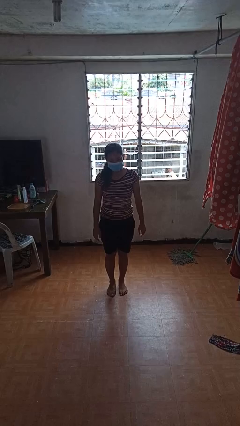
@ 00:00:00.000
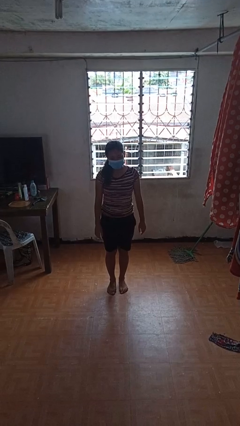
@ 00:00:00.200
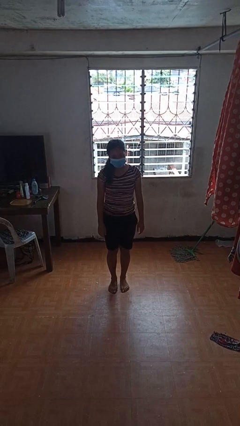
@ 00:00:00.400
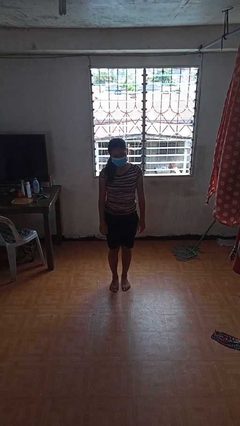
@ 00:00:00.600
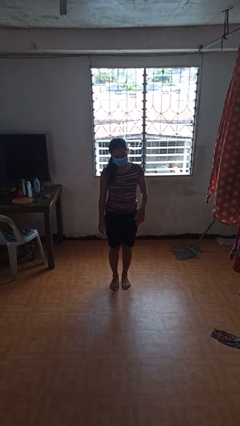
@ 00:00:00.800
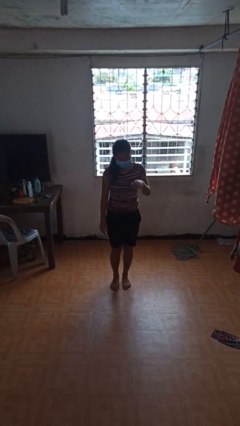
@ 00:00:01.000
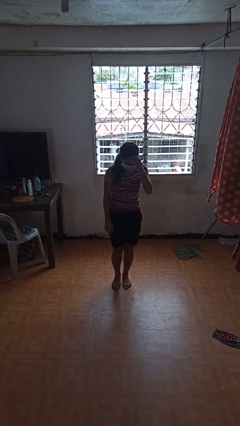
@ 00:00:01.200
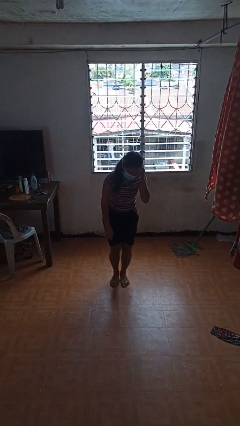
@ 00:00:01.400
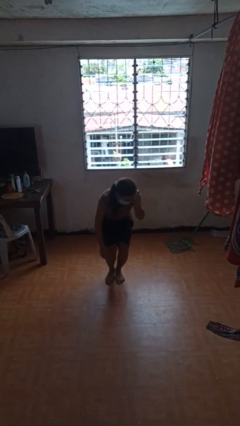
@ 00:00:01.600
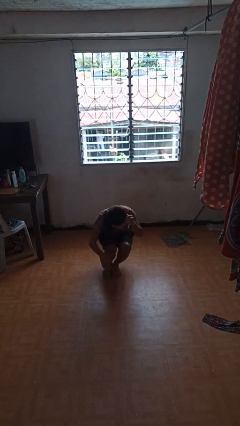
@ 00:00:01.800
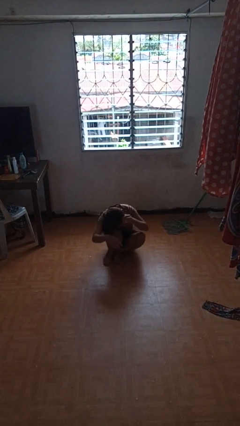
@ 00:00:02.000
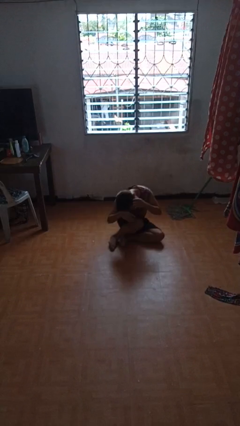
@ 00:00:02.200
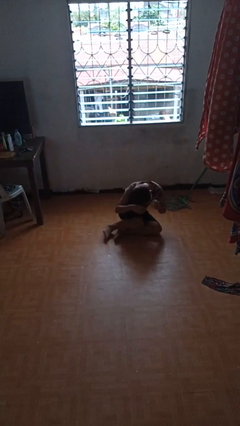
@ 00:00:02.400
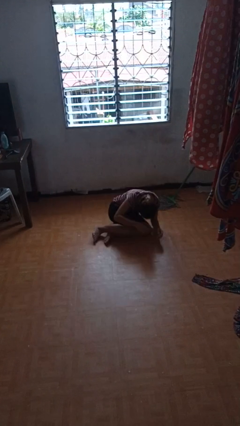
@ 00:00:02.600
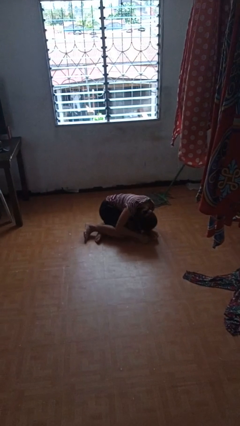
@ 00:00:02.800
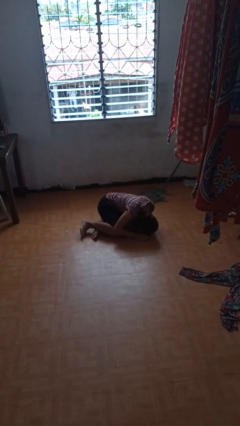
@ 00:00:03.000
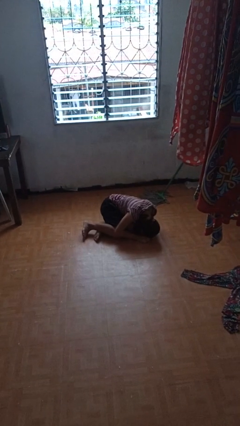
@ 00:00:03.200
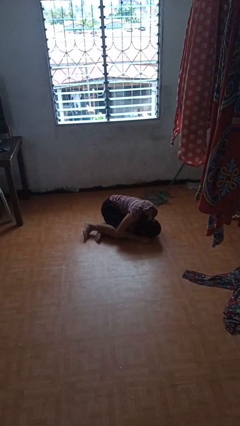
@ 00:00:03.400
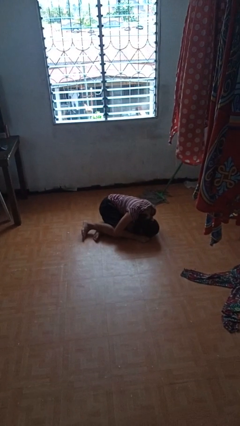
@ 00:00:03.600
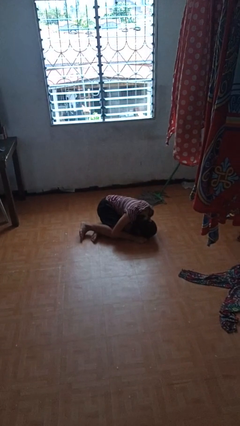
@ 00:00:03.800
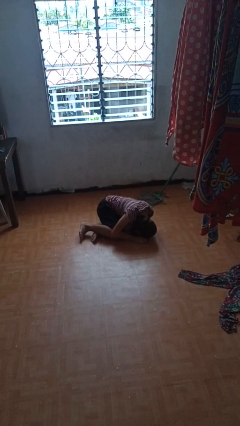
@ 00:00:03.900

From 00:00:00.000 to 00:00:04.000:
person falls while standing

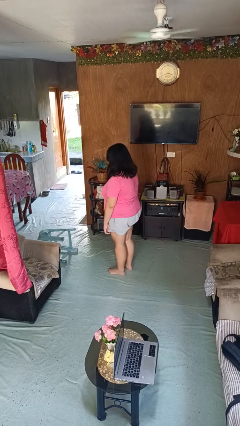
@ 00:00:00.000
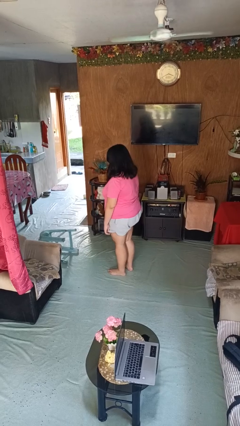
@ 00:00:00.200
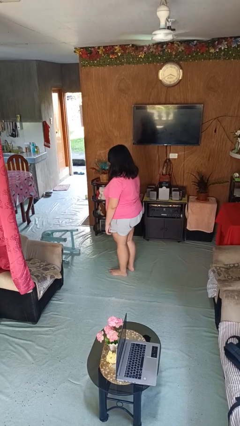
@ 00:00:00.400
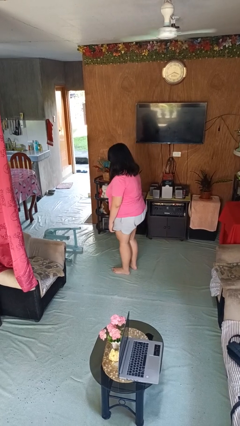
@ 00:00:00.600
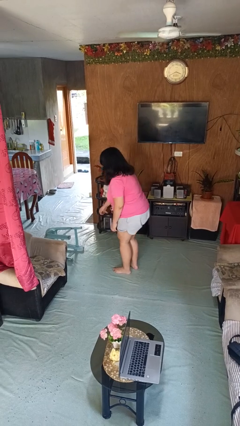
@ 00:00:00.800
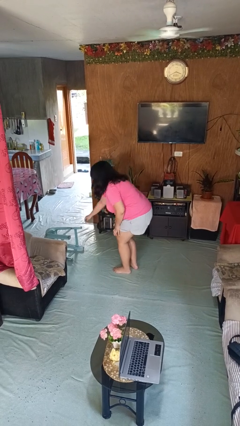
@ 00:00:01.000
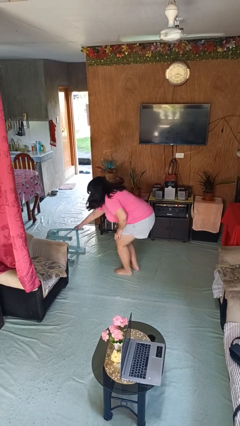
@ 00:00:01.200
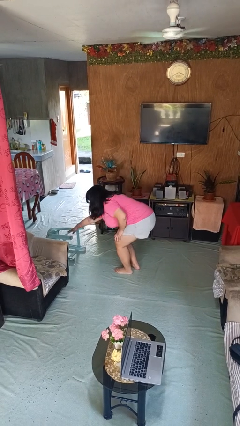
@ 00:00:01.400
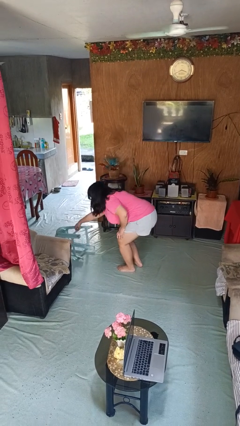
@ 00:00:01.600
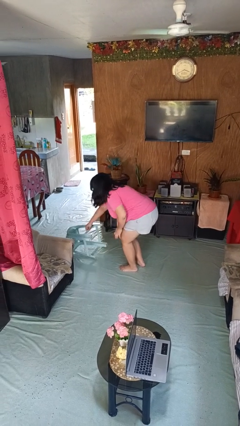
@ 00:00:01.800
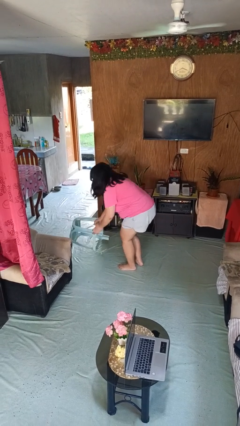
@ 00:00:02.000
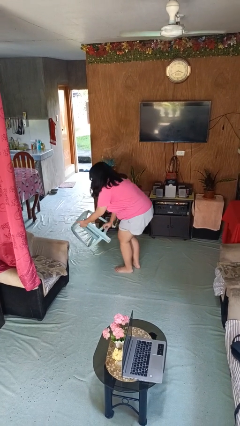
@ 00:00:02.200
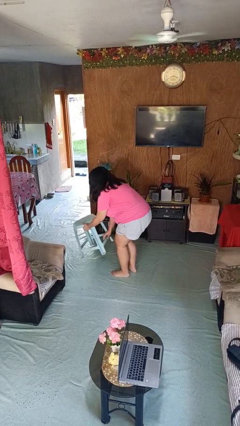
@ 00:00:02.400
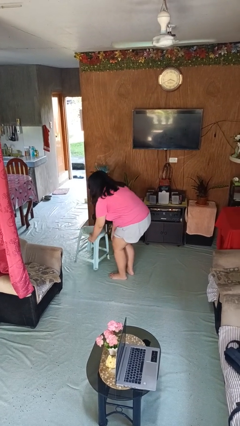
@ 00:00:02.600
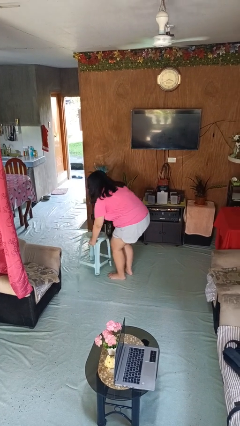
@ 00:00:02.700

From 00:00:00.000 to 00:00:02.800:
person sets upright furniture

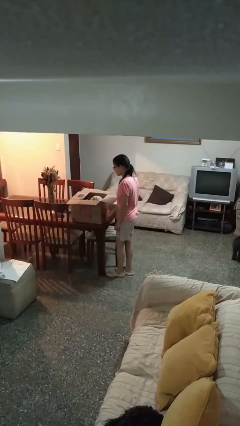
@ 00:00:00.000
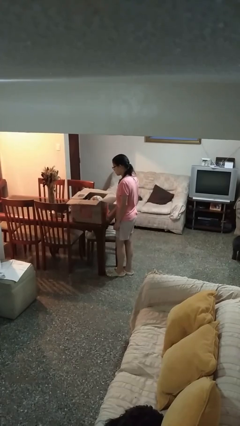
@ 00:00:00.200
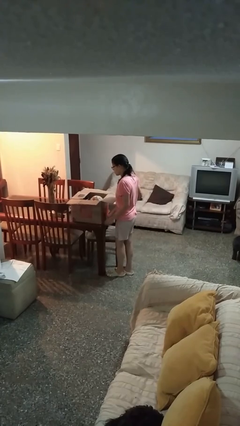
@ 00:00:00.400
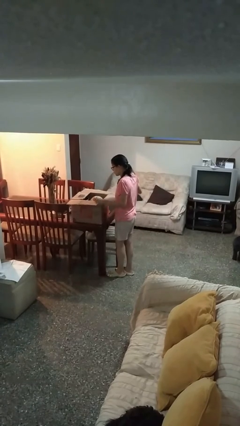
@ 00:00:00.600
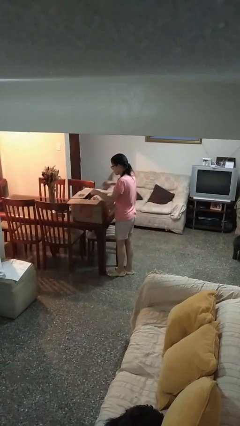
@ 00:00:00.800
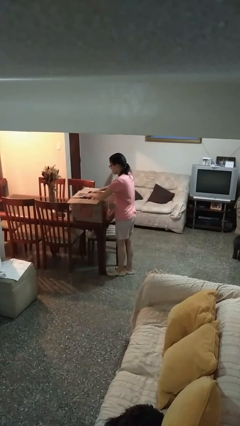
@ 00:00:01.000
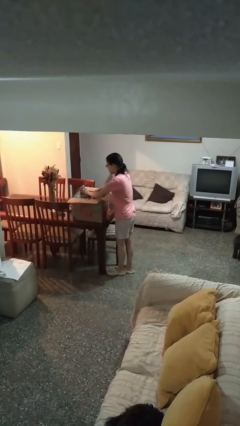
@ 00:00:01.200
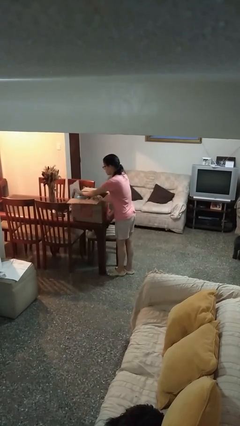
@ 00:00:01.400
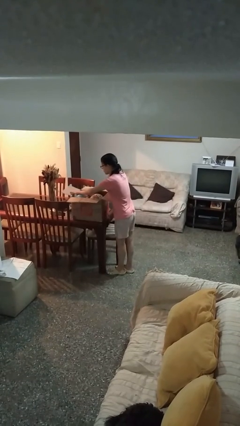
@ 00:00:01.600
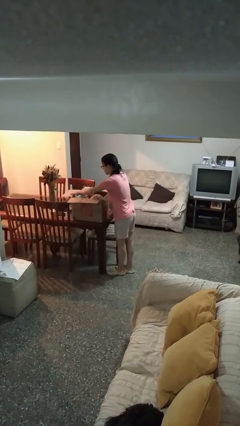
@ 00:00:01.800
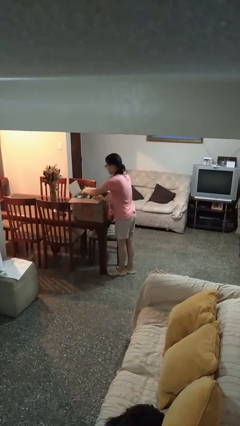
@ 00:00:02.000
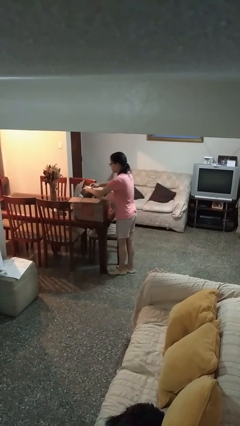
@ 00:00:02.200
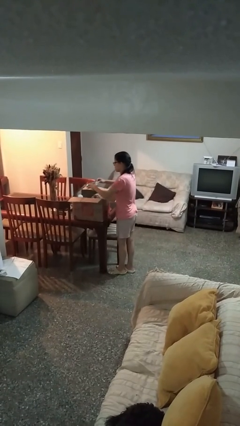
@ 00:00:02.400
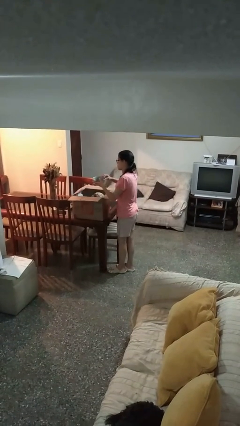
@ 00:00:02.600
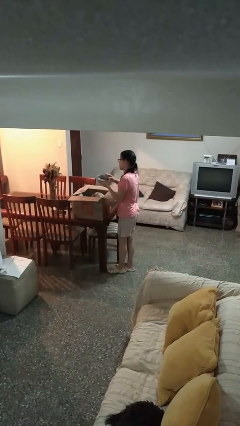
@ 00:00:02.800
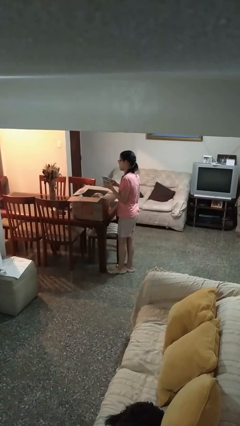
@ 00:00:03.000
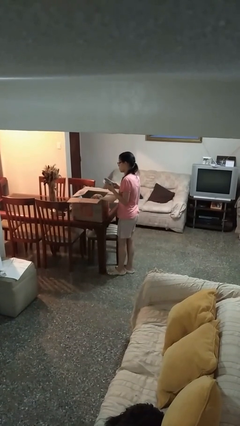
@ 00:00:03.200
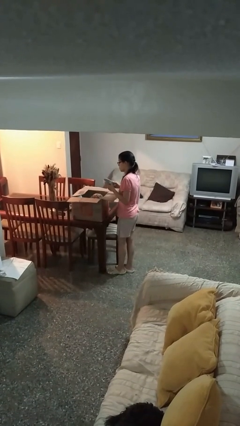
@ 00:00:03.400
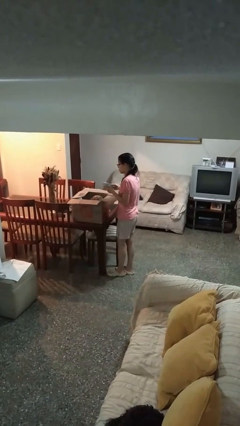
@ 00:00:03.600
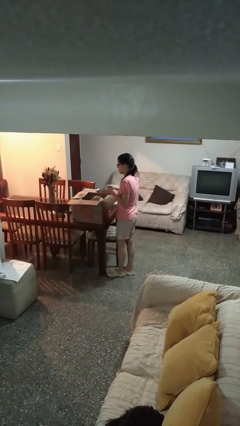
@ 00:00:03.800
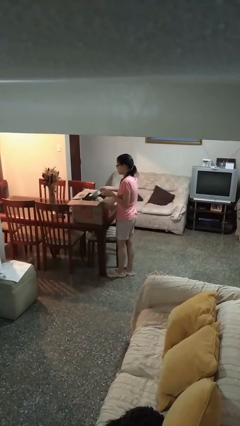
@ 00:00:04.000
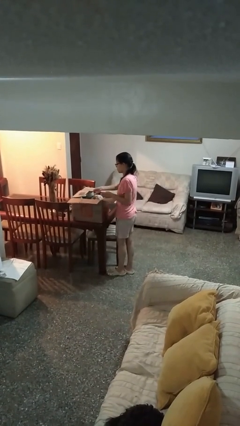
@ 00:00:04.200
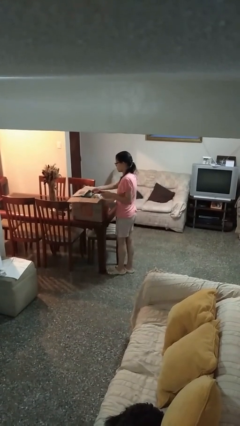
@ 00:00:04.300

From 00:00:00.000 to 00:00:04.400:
person searches in box

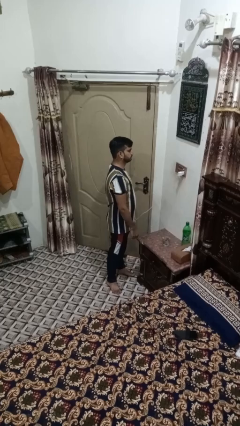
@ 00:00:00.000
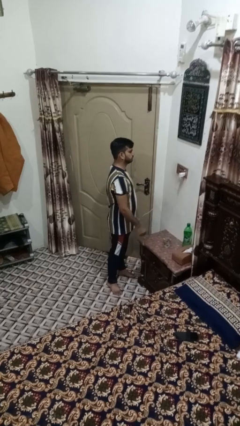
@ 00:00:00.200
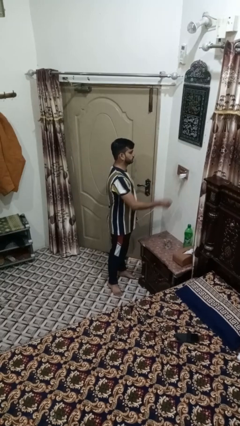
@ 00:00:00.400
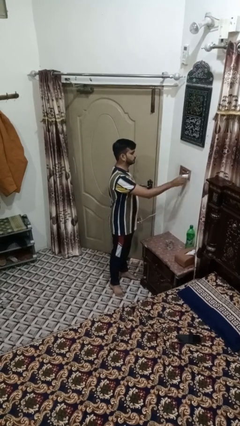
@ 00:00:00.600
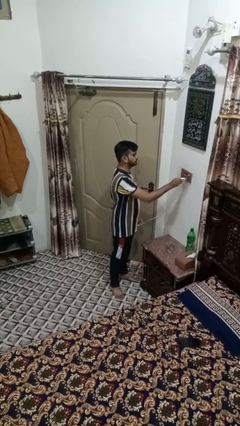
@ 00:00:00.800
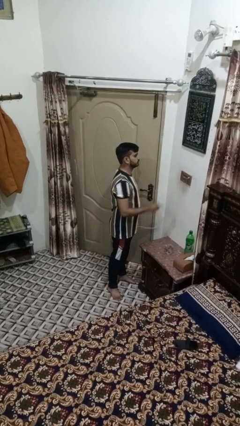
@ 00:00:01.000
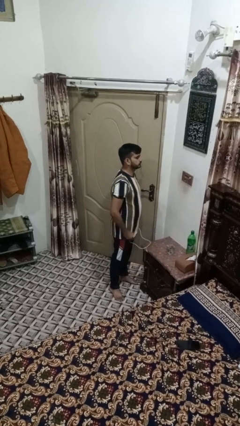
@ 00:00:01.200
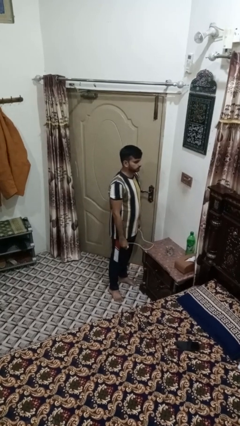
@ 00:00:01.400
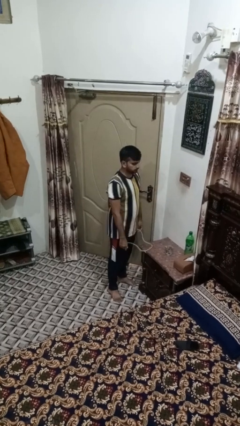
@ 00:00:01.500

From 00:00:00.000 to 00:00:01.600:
person unplugs from electrical socket

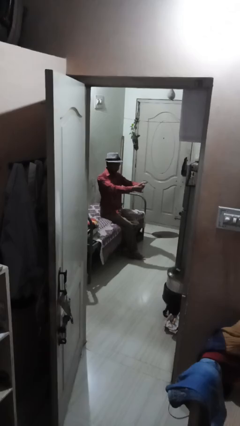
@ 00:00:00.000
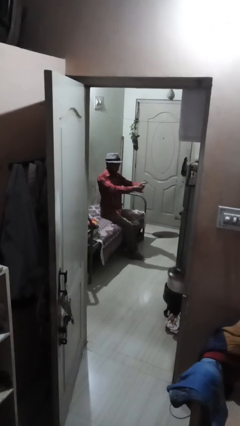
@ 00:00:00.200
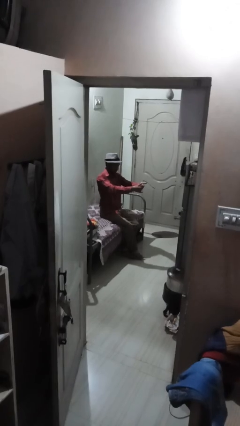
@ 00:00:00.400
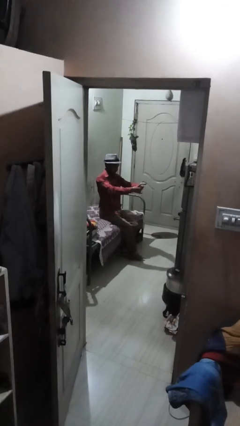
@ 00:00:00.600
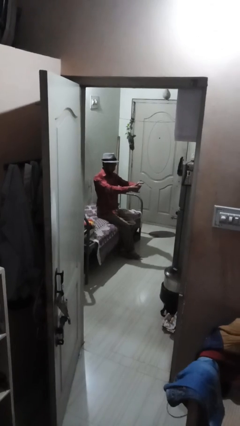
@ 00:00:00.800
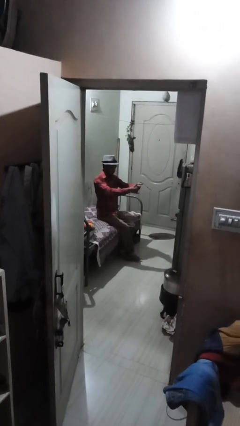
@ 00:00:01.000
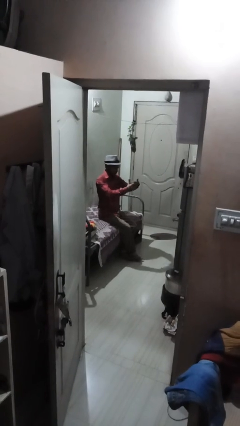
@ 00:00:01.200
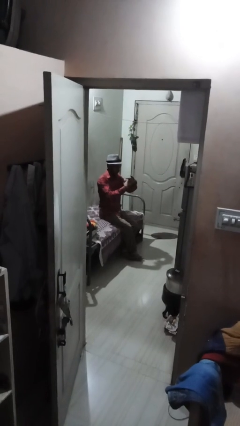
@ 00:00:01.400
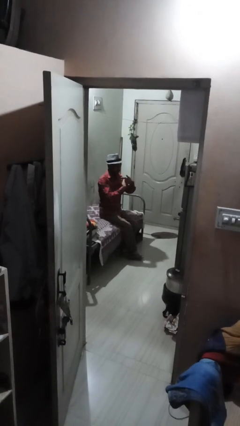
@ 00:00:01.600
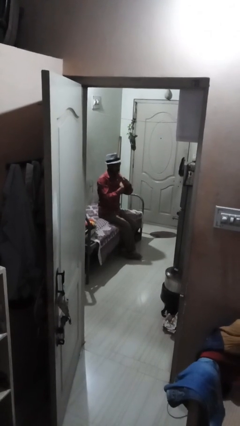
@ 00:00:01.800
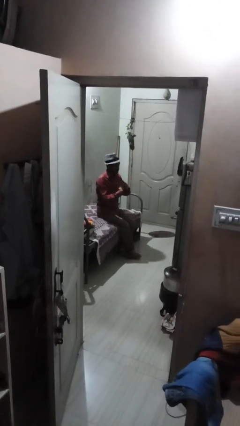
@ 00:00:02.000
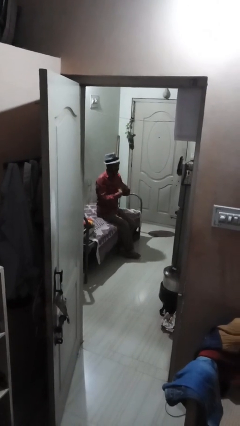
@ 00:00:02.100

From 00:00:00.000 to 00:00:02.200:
person cracks knuckles

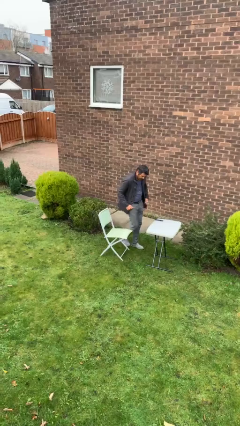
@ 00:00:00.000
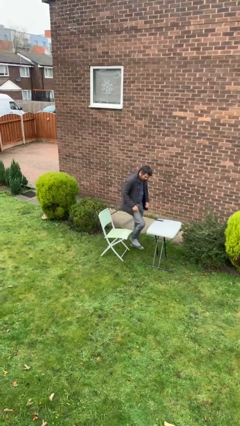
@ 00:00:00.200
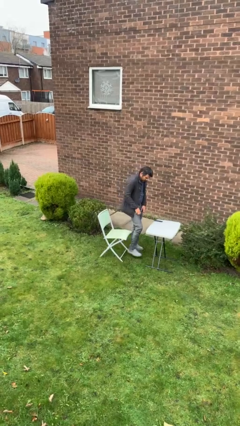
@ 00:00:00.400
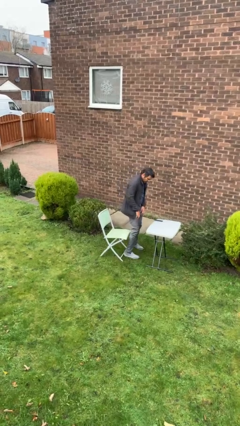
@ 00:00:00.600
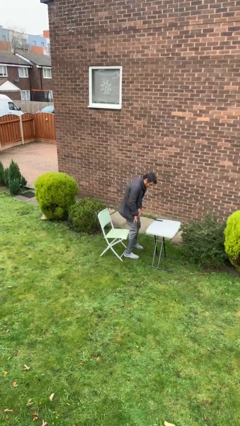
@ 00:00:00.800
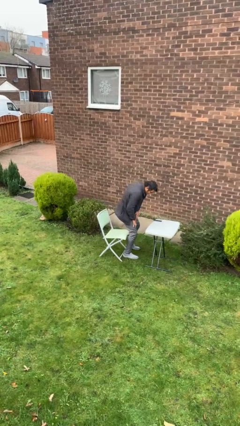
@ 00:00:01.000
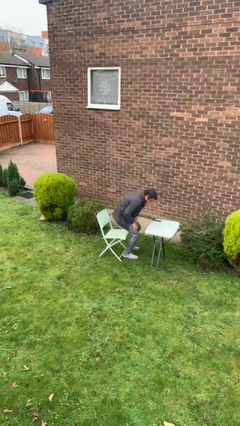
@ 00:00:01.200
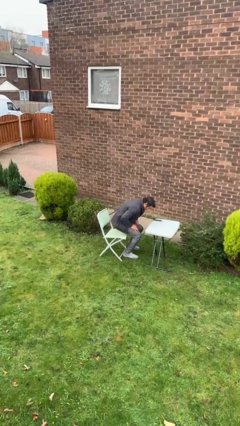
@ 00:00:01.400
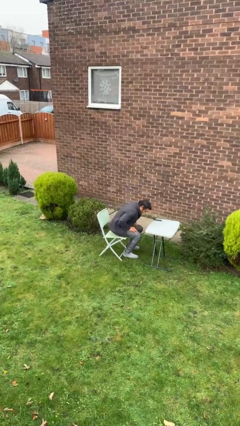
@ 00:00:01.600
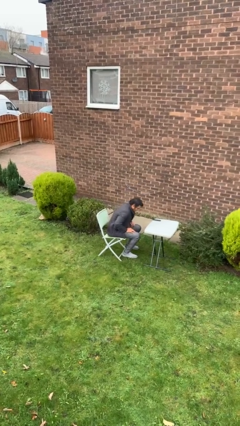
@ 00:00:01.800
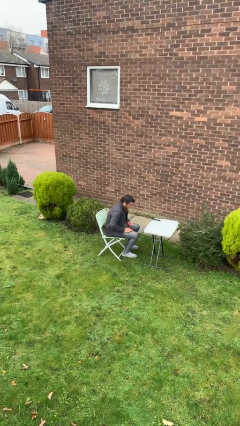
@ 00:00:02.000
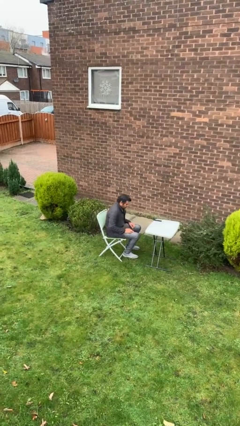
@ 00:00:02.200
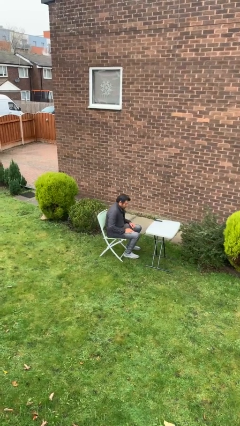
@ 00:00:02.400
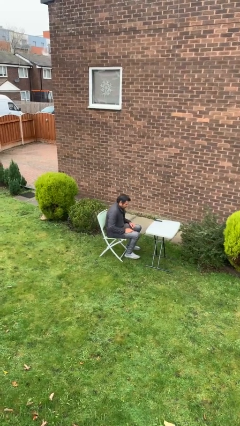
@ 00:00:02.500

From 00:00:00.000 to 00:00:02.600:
person sits down
